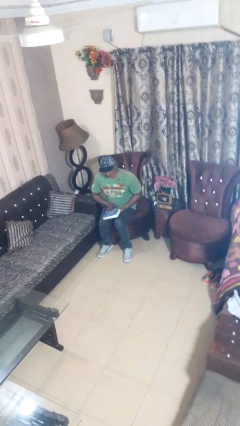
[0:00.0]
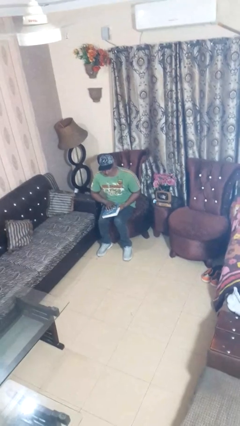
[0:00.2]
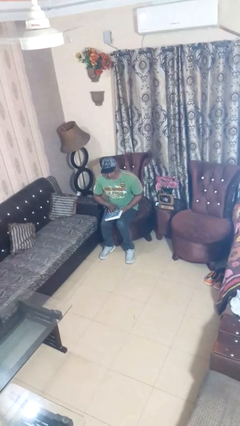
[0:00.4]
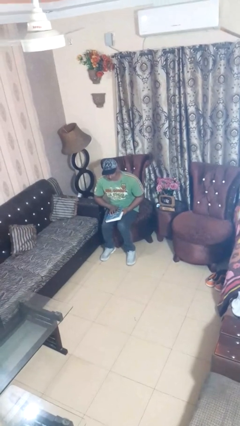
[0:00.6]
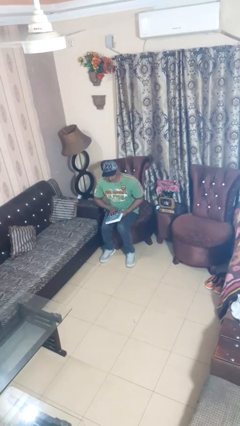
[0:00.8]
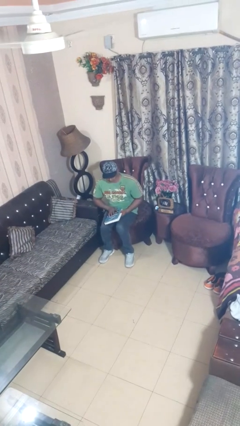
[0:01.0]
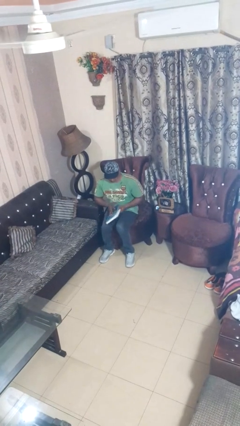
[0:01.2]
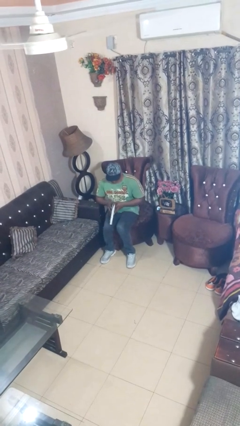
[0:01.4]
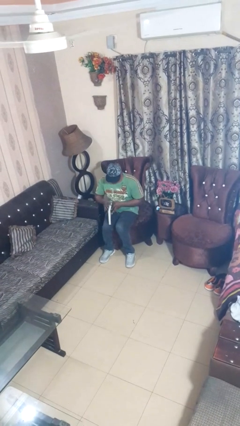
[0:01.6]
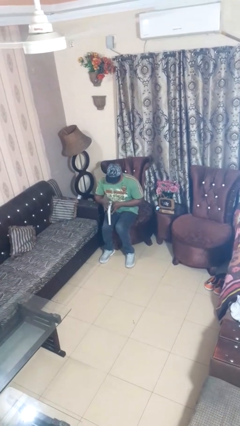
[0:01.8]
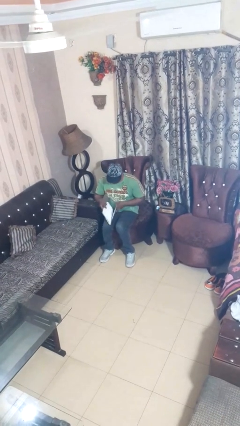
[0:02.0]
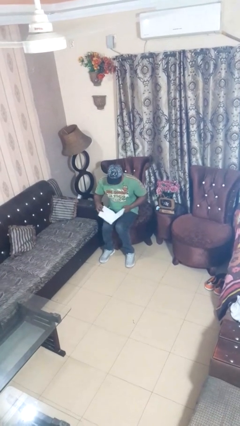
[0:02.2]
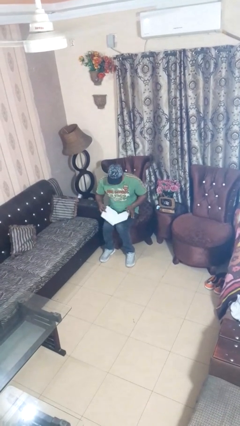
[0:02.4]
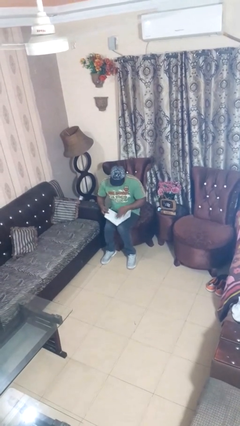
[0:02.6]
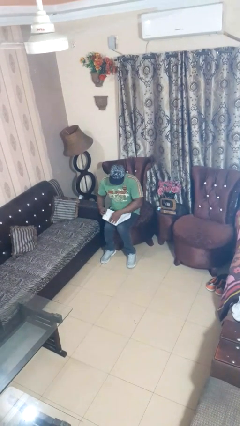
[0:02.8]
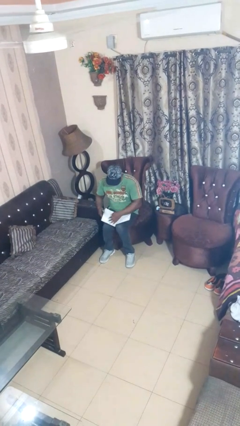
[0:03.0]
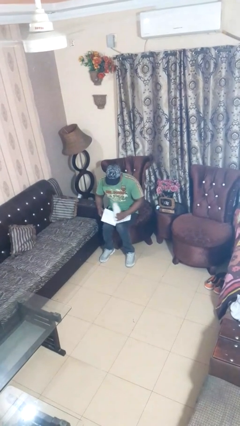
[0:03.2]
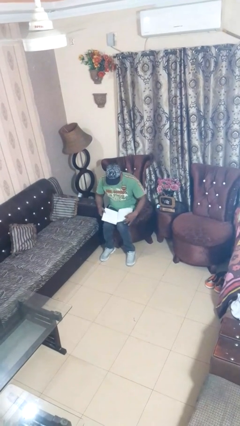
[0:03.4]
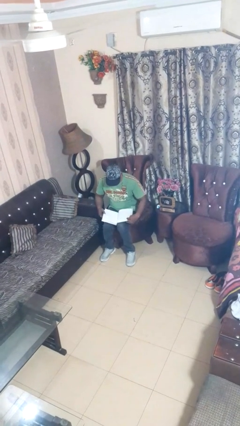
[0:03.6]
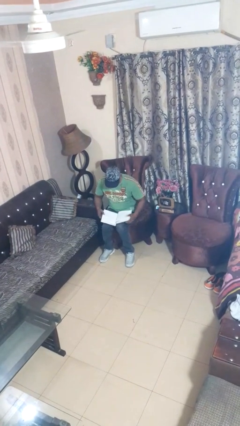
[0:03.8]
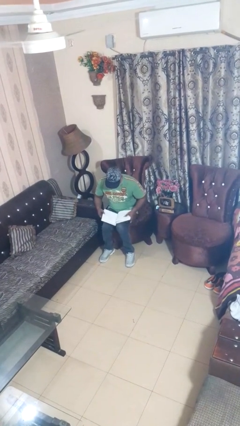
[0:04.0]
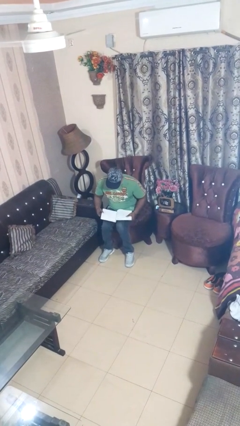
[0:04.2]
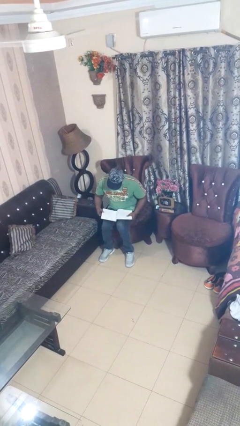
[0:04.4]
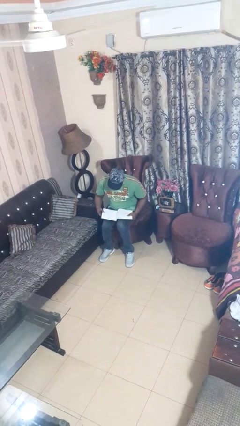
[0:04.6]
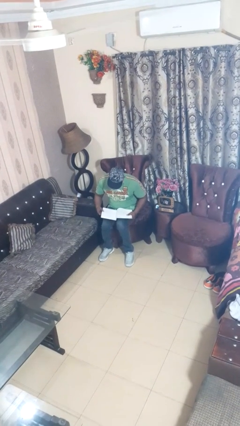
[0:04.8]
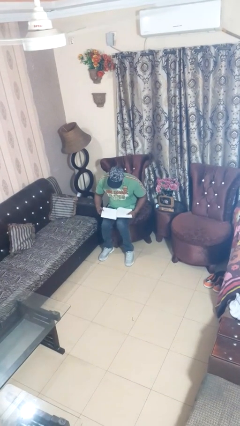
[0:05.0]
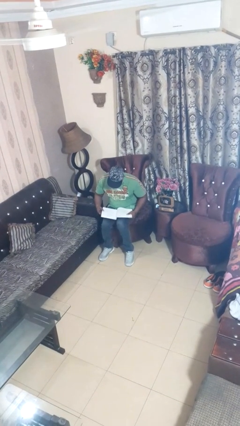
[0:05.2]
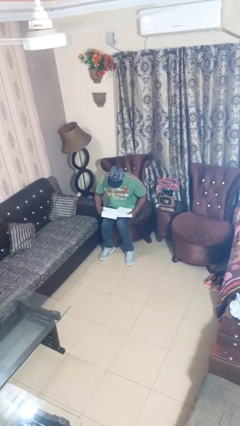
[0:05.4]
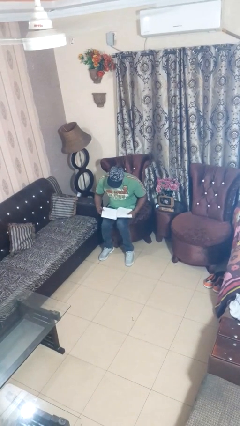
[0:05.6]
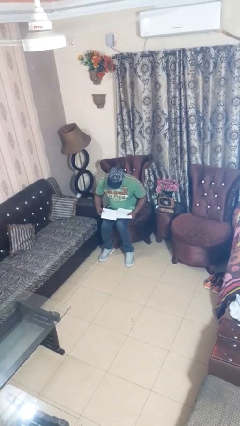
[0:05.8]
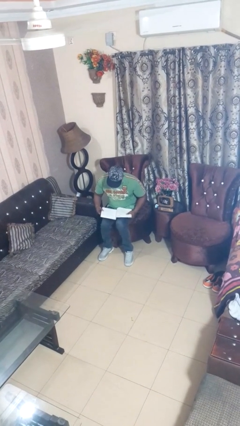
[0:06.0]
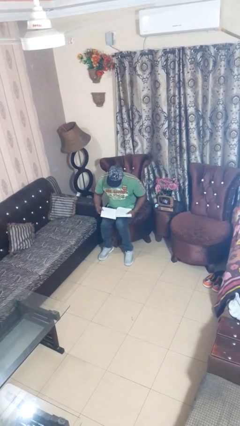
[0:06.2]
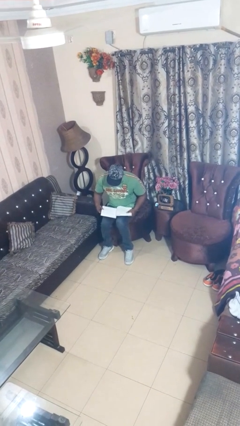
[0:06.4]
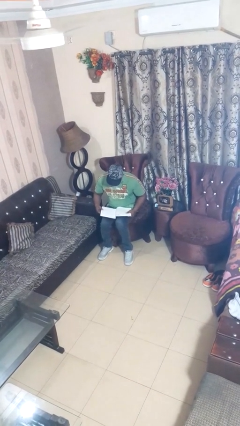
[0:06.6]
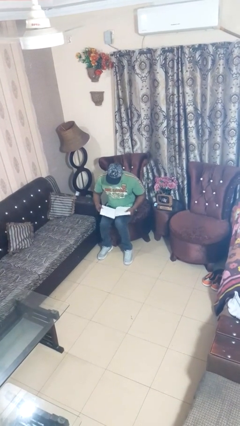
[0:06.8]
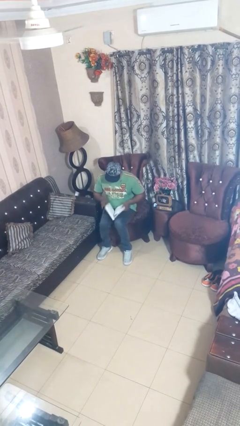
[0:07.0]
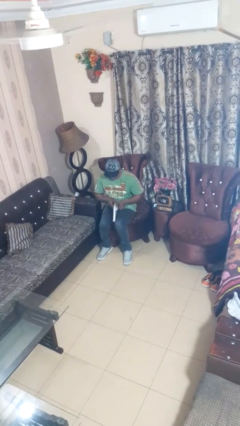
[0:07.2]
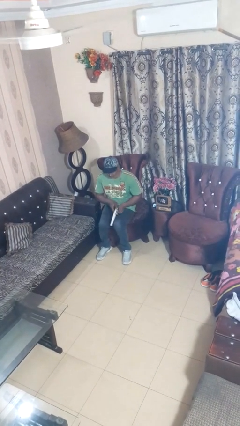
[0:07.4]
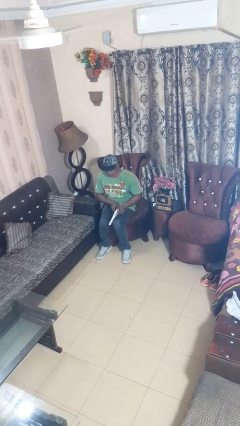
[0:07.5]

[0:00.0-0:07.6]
person reads magazine

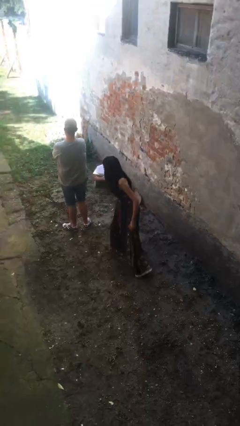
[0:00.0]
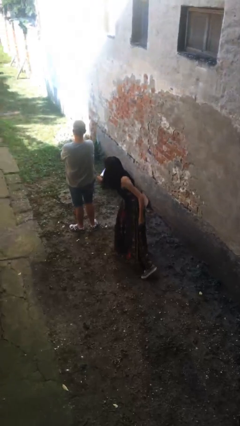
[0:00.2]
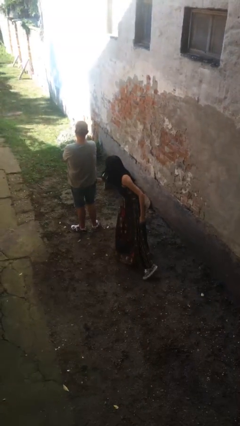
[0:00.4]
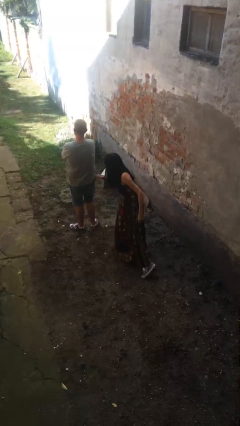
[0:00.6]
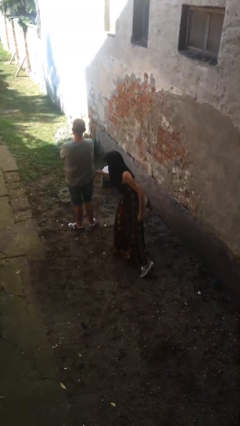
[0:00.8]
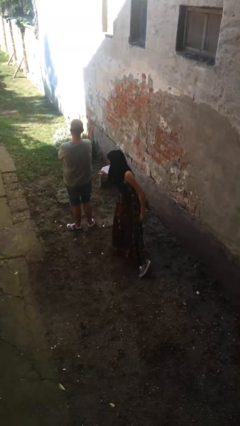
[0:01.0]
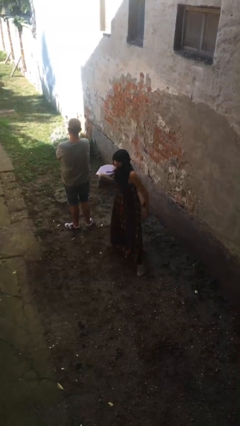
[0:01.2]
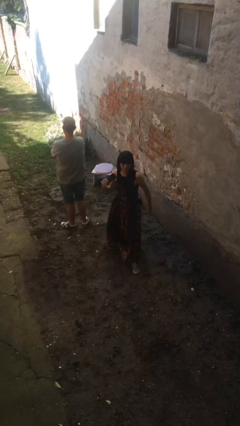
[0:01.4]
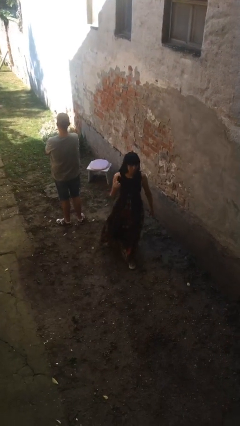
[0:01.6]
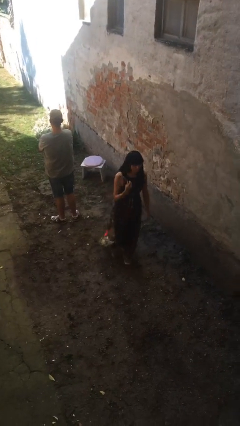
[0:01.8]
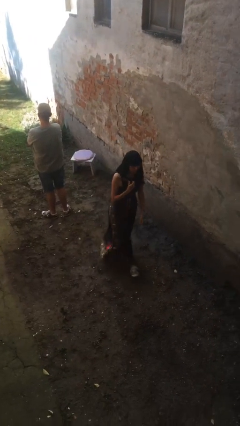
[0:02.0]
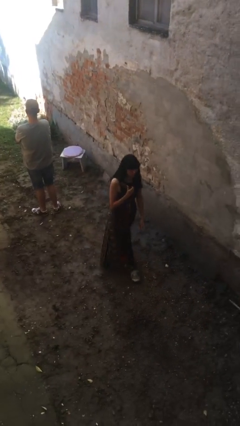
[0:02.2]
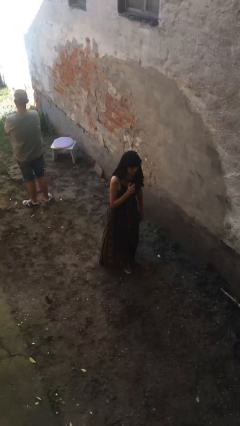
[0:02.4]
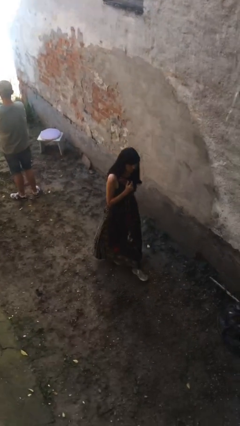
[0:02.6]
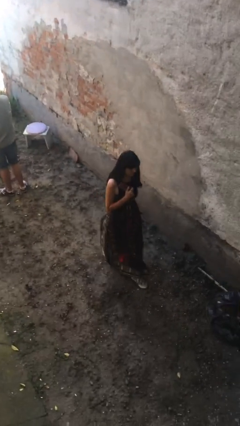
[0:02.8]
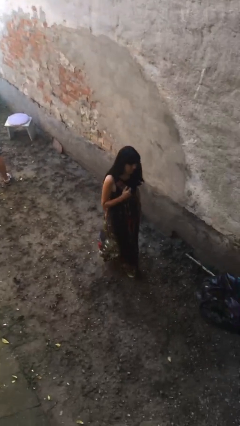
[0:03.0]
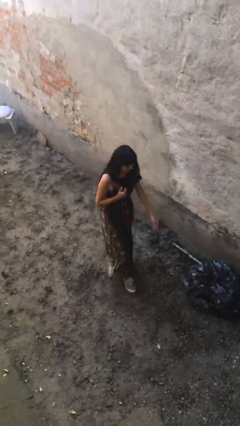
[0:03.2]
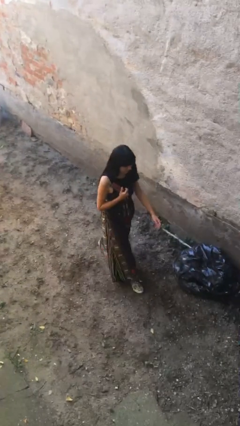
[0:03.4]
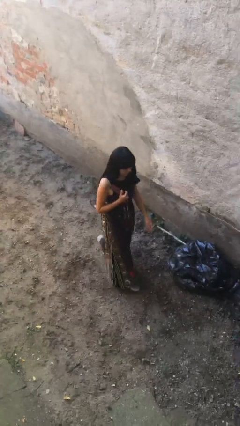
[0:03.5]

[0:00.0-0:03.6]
person steals object from person

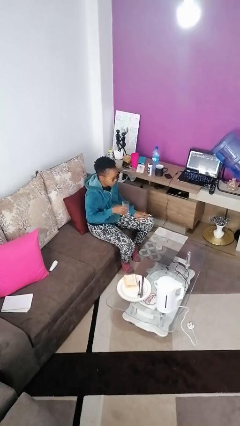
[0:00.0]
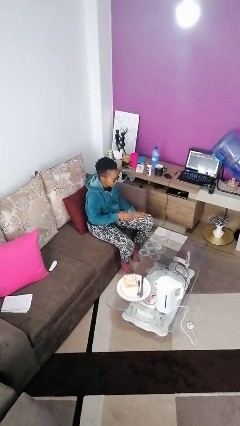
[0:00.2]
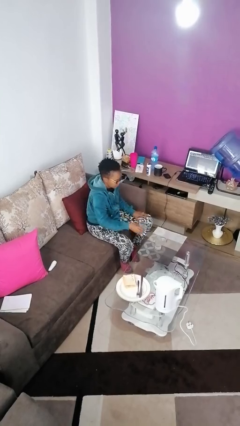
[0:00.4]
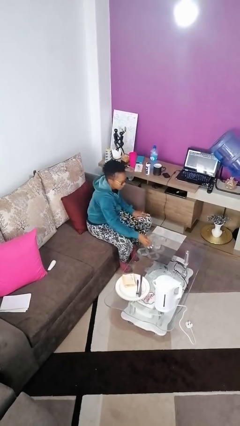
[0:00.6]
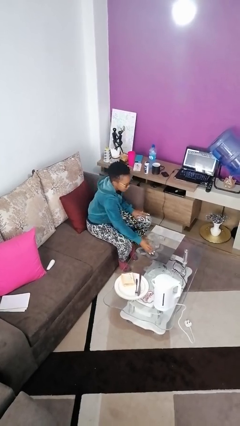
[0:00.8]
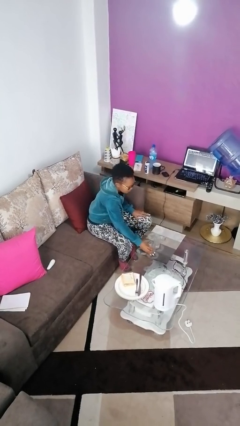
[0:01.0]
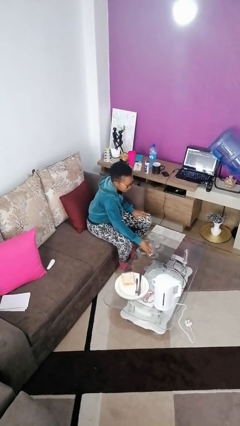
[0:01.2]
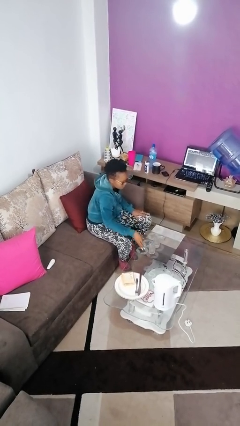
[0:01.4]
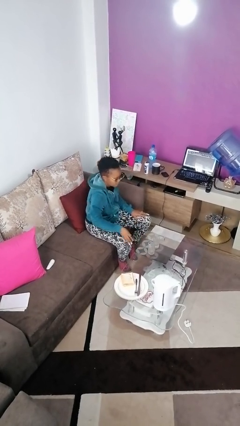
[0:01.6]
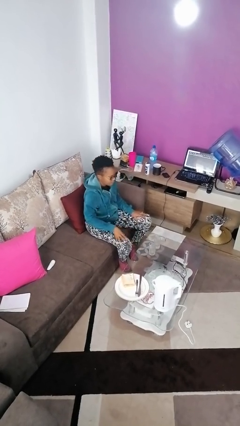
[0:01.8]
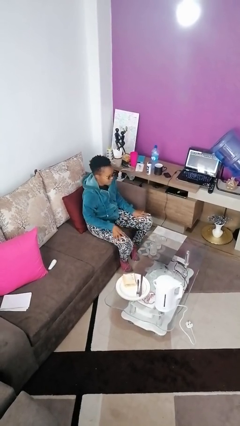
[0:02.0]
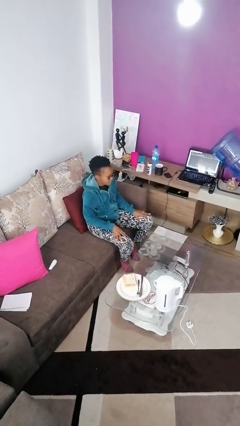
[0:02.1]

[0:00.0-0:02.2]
person puts down object on table

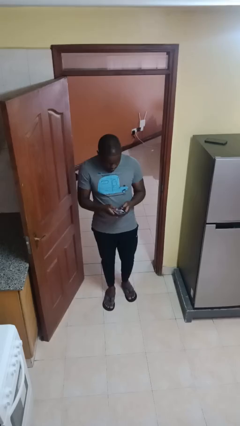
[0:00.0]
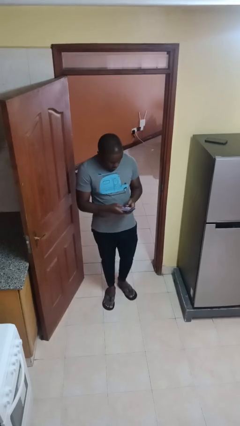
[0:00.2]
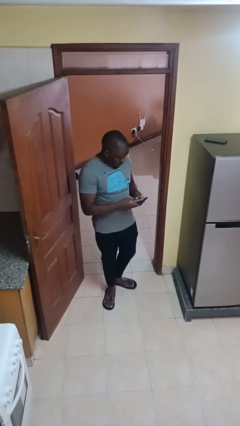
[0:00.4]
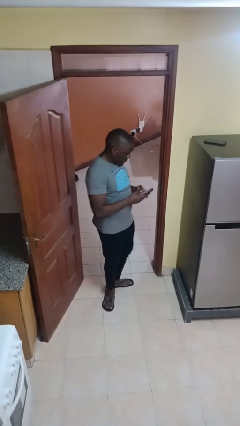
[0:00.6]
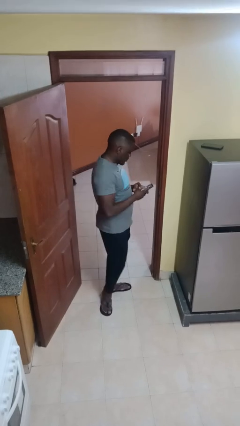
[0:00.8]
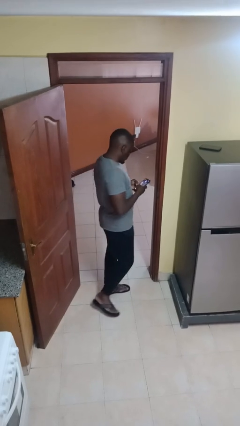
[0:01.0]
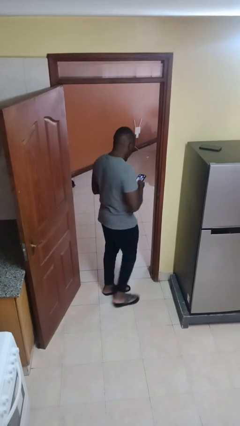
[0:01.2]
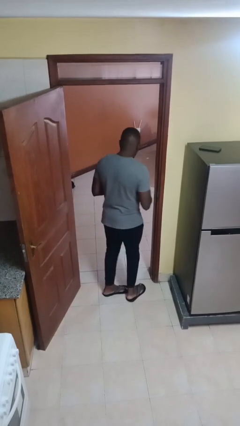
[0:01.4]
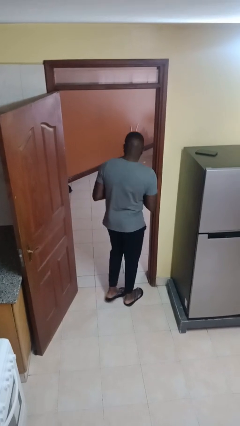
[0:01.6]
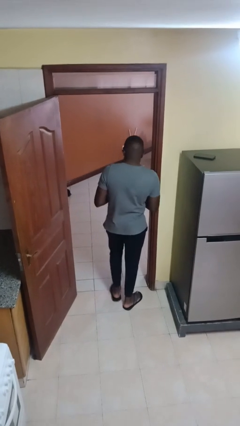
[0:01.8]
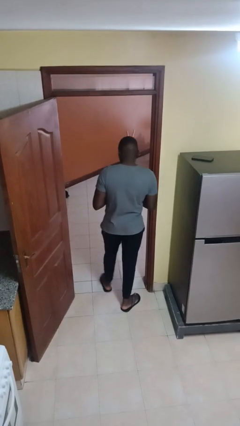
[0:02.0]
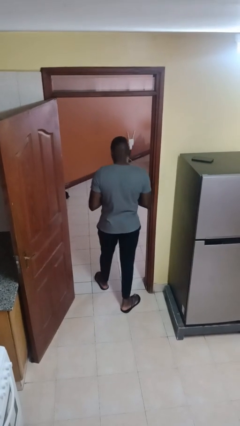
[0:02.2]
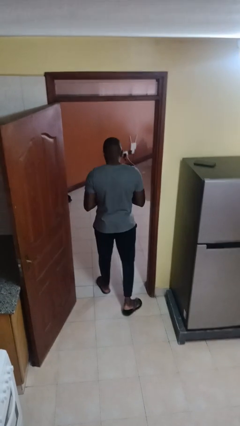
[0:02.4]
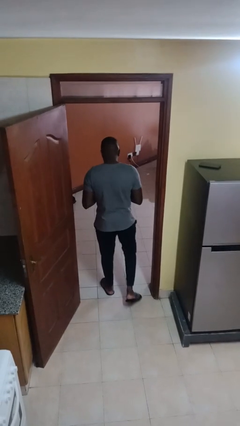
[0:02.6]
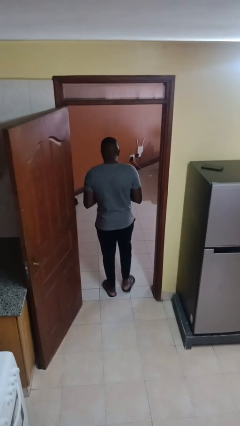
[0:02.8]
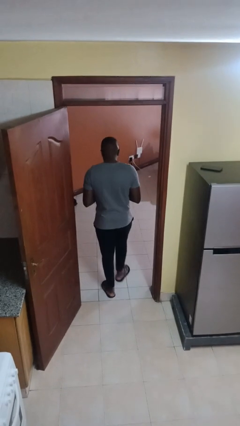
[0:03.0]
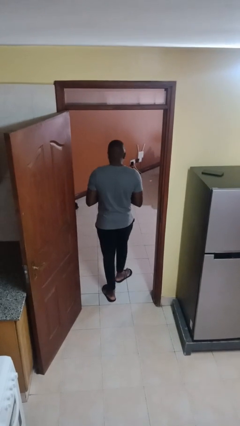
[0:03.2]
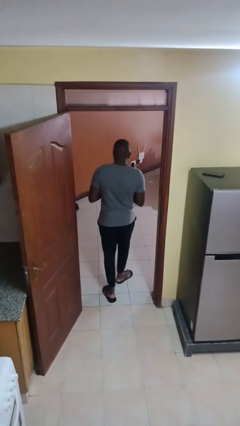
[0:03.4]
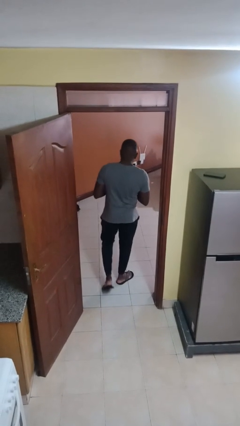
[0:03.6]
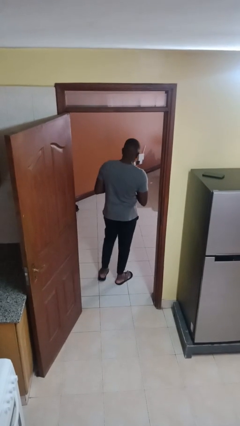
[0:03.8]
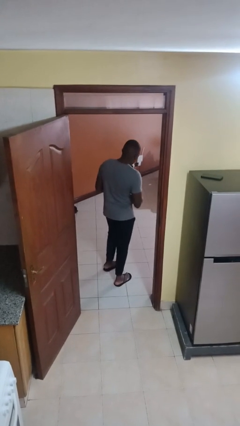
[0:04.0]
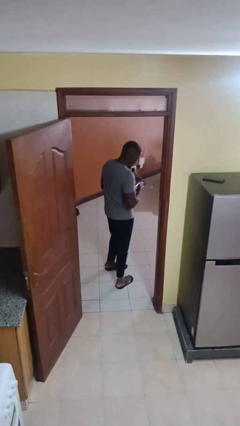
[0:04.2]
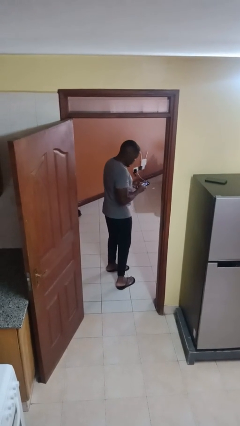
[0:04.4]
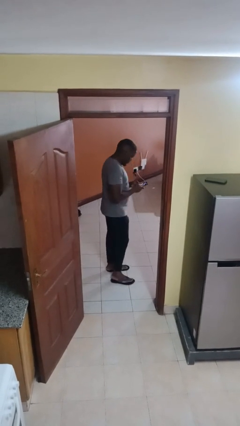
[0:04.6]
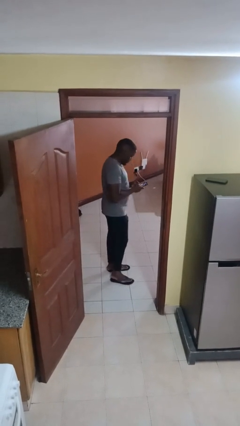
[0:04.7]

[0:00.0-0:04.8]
person exits scene through structure
